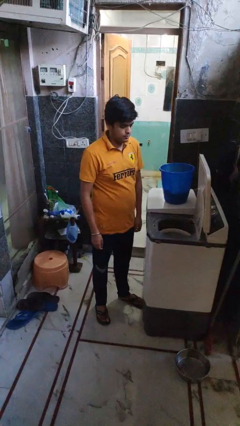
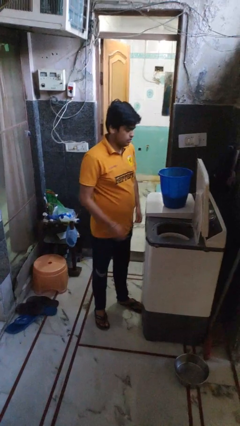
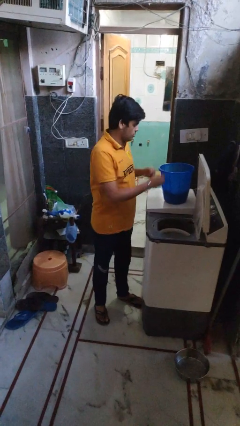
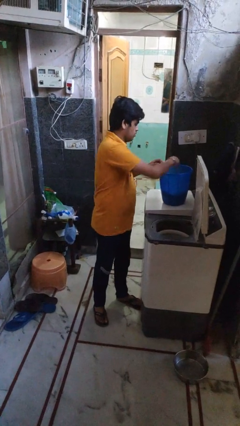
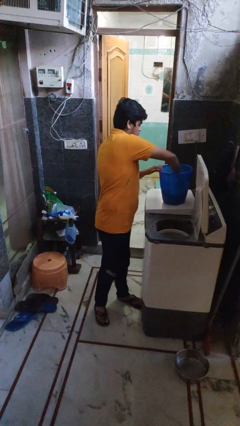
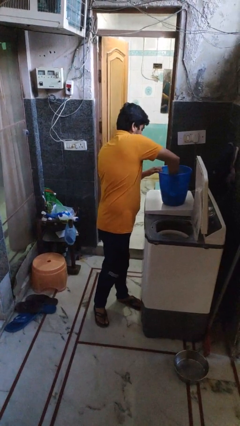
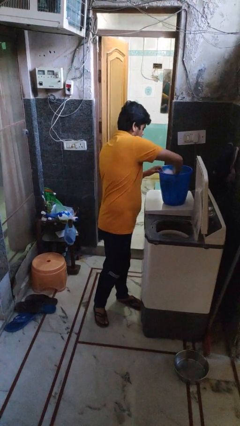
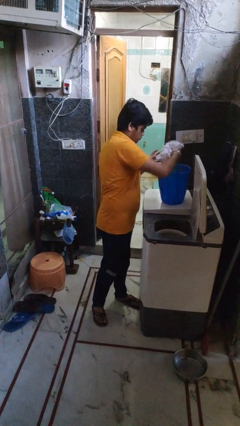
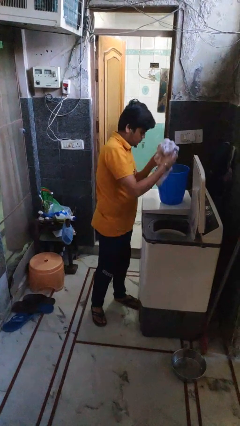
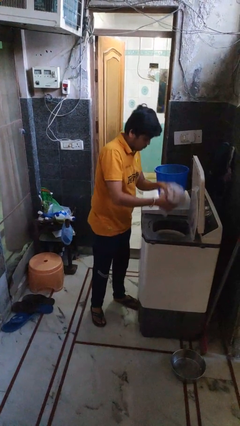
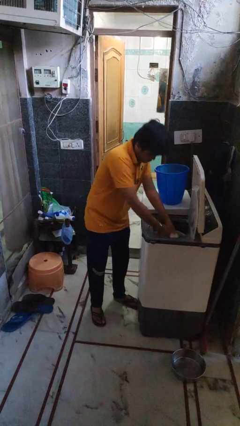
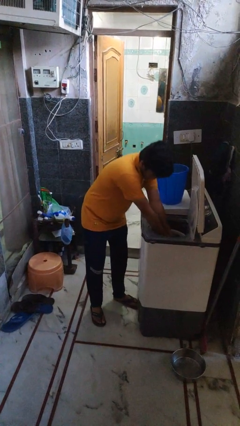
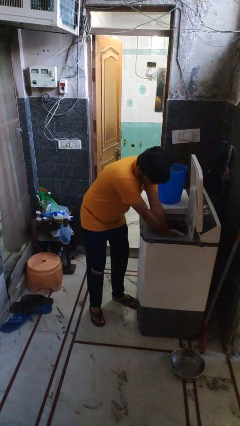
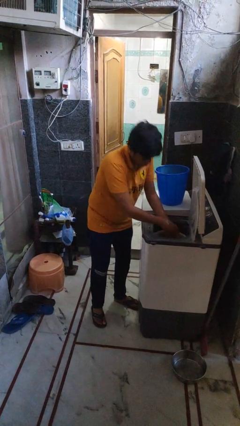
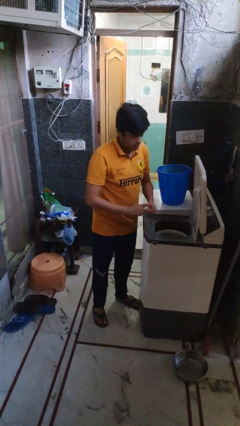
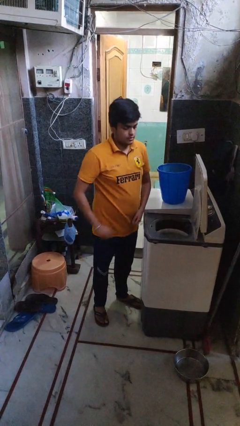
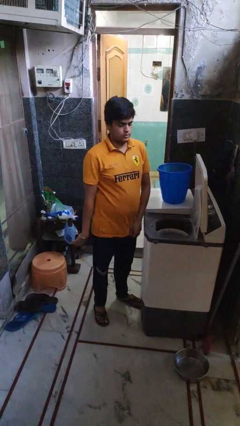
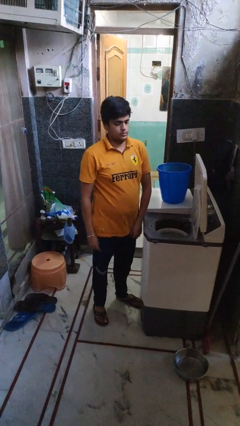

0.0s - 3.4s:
person loads clotheswasher

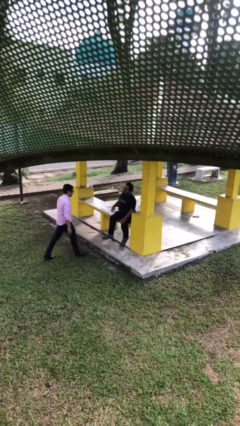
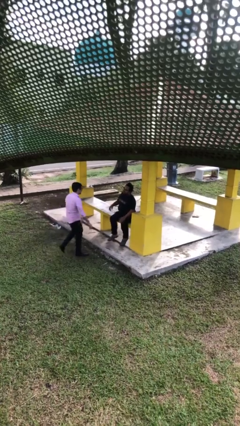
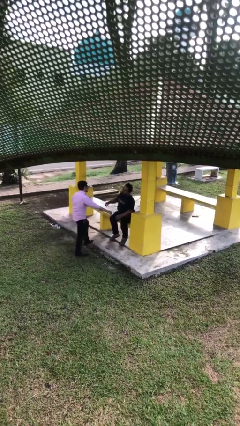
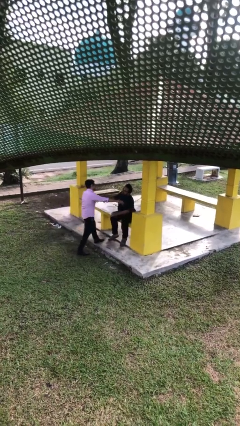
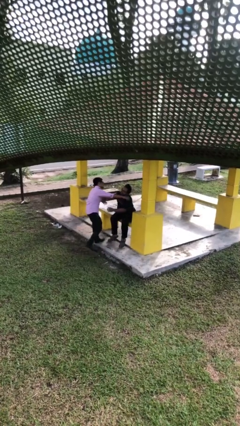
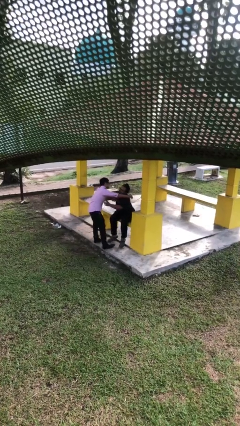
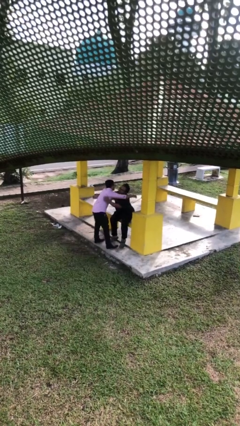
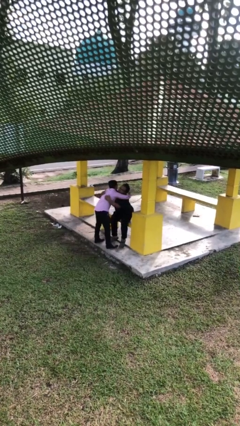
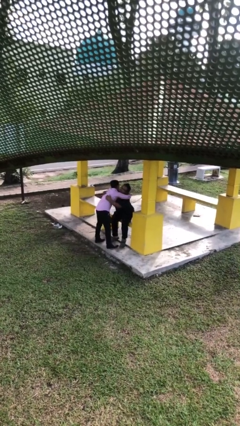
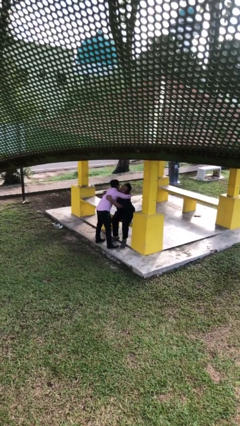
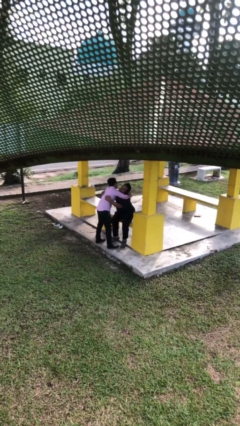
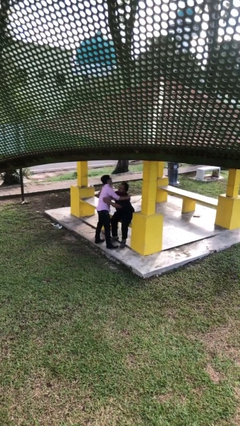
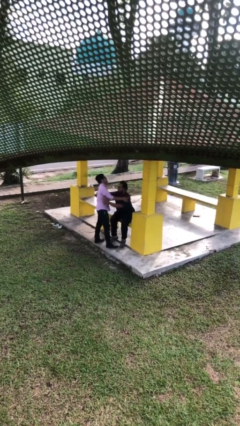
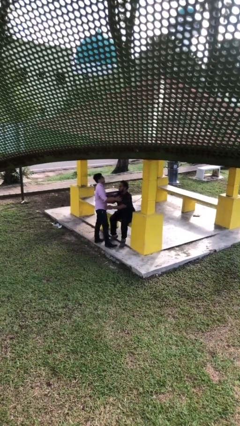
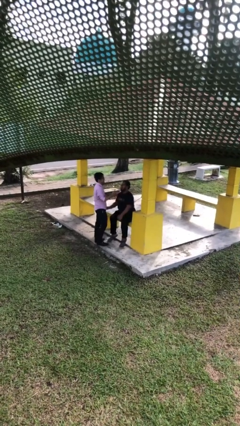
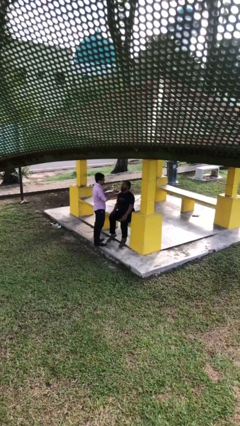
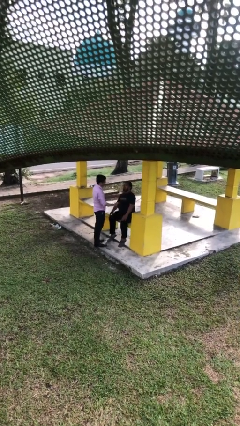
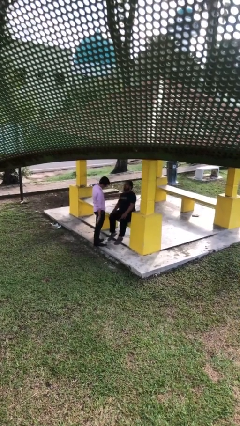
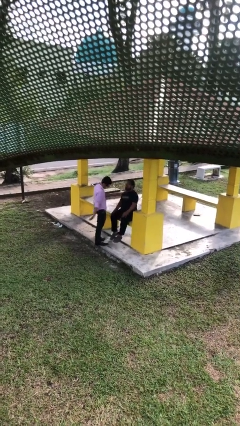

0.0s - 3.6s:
person embraces person

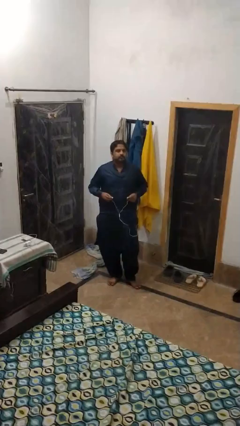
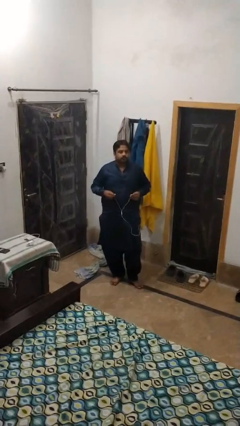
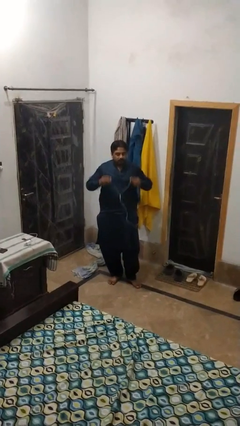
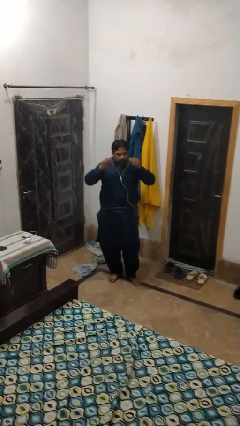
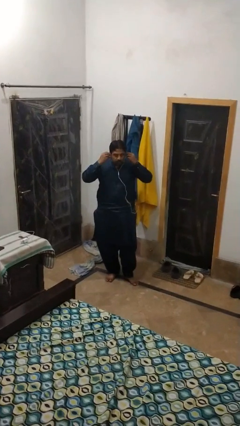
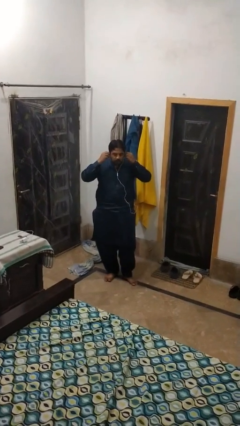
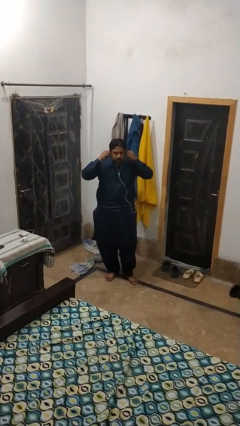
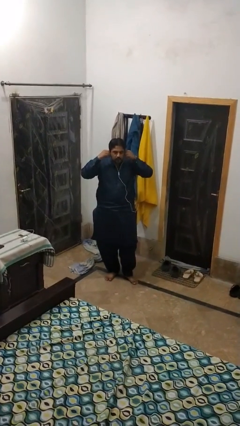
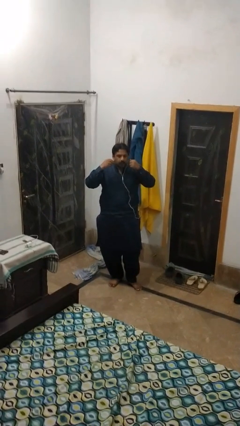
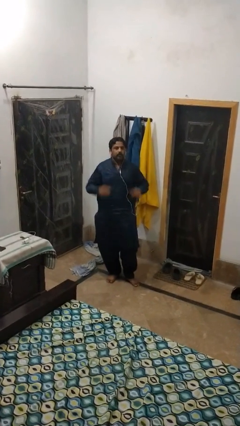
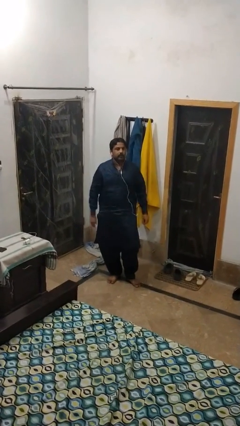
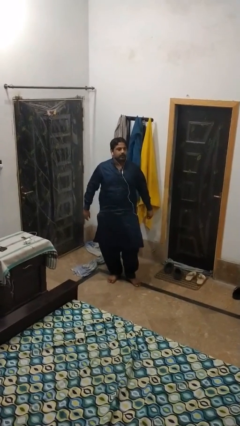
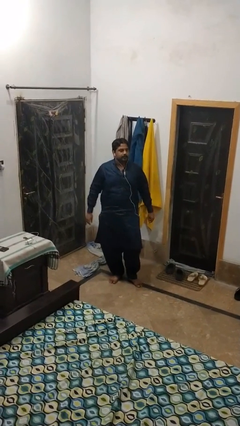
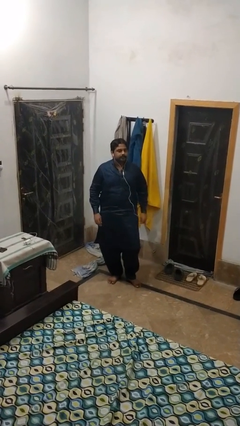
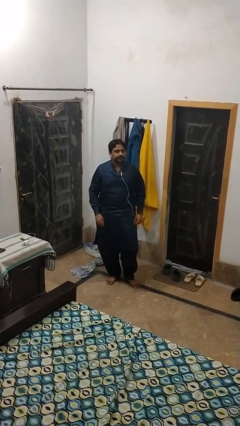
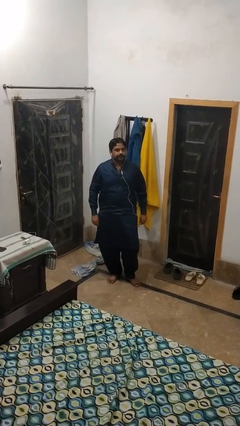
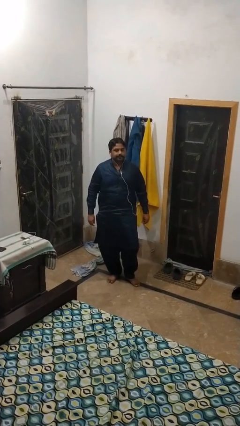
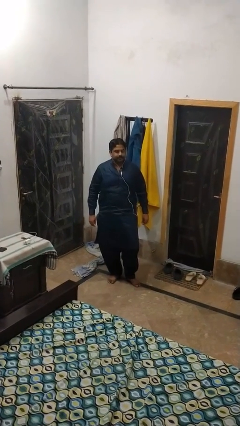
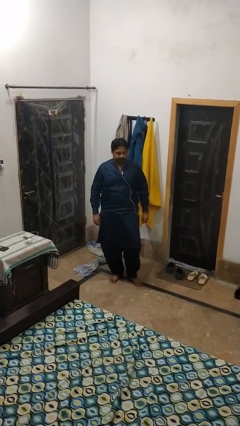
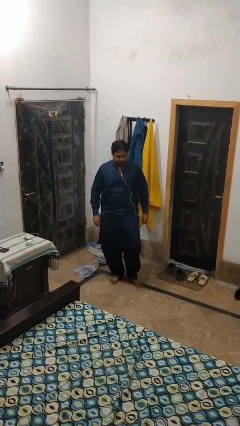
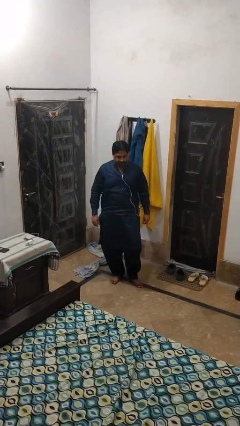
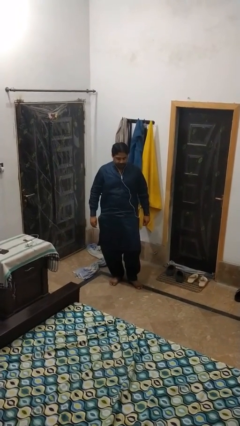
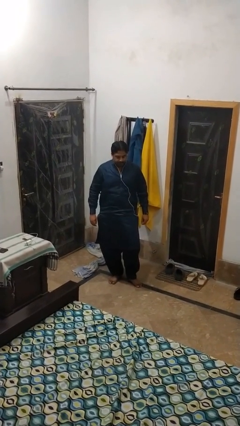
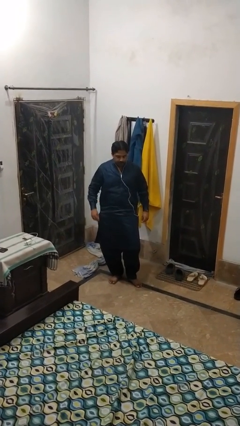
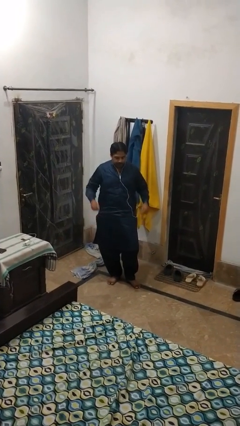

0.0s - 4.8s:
person puts on headphones

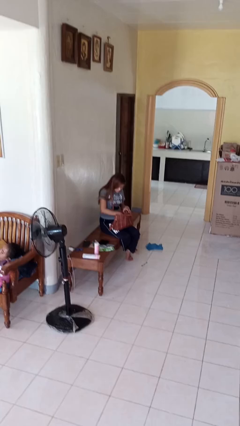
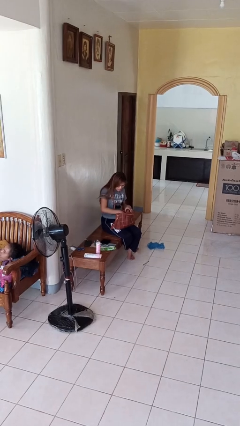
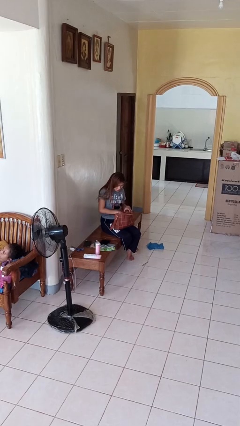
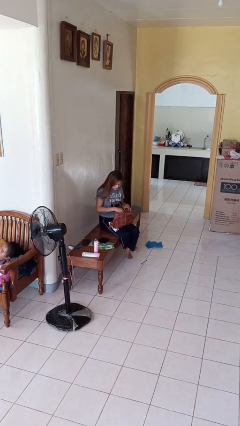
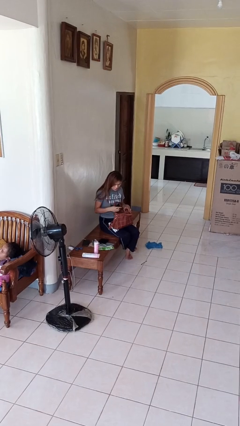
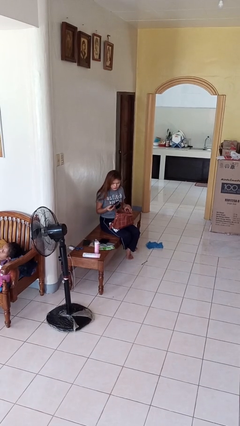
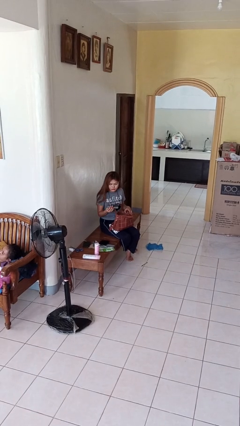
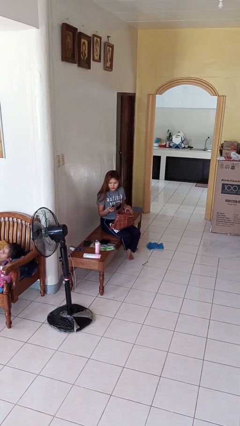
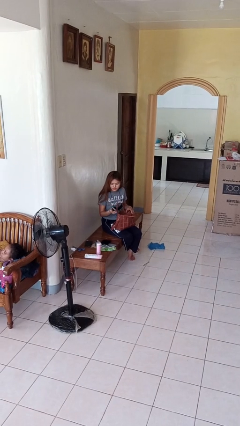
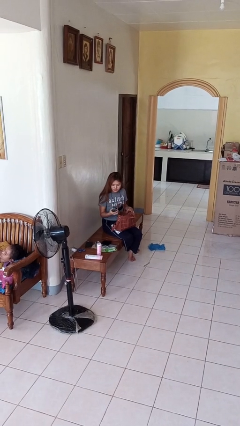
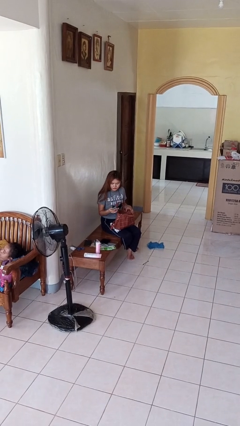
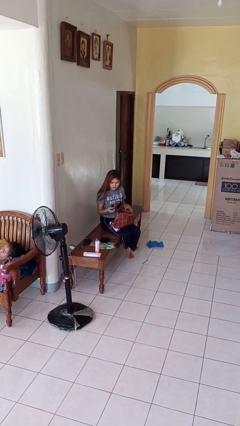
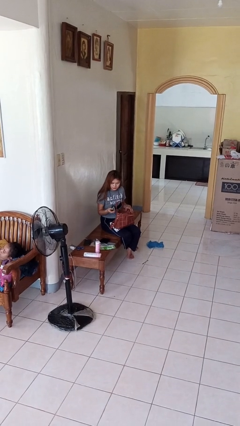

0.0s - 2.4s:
person takes object from purse

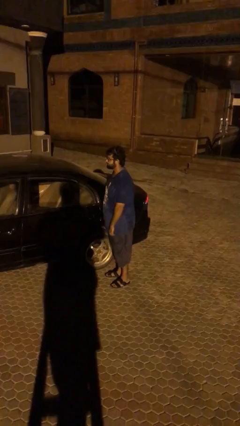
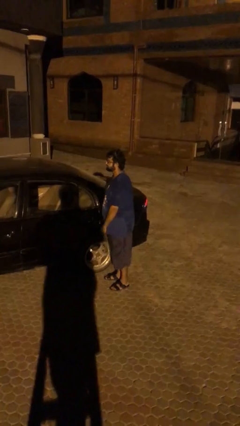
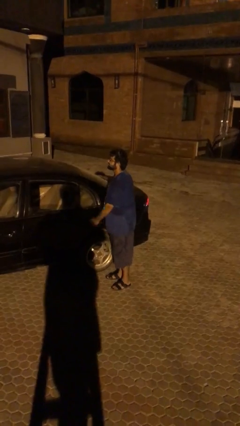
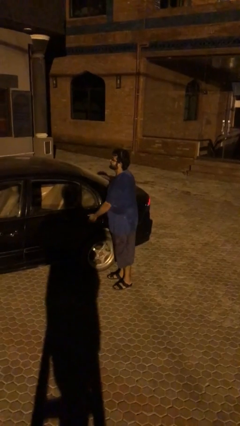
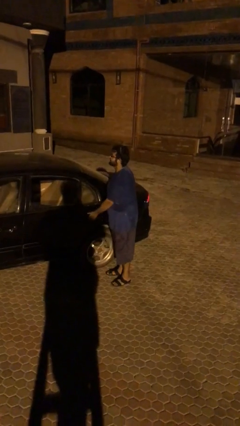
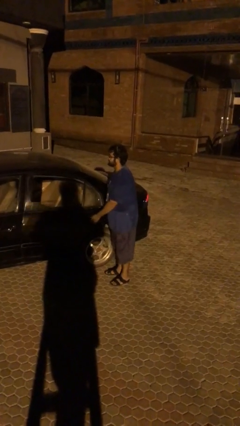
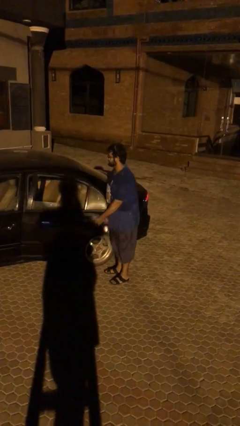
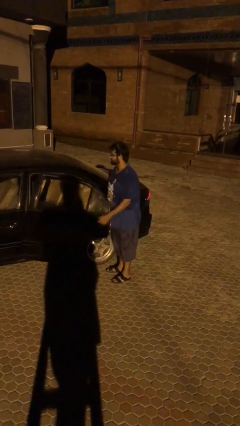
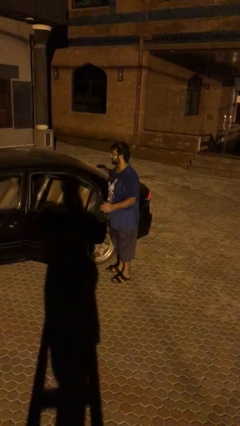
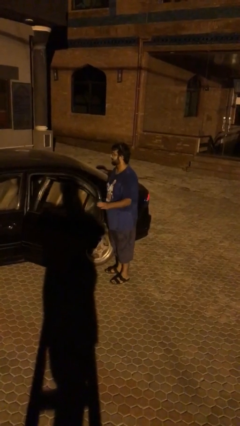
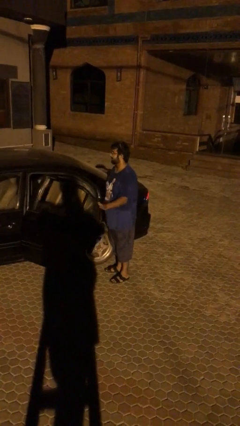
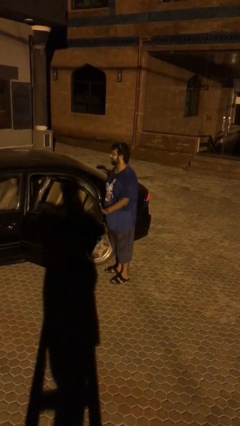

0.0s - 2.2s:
person opens car door

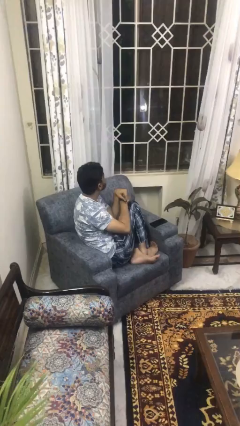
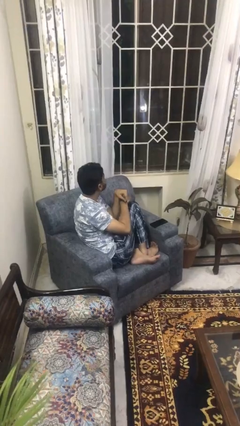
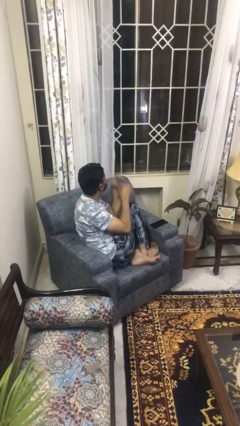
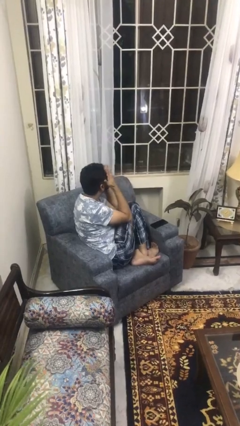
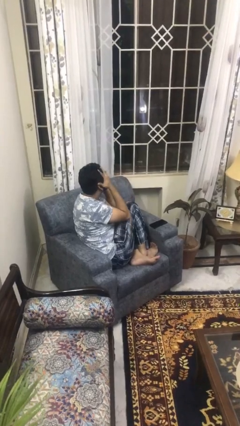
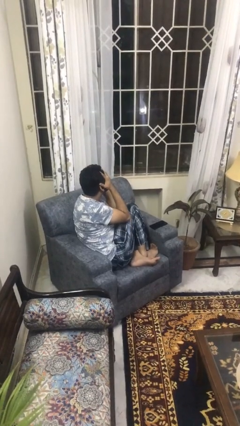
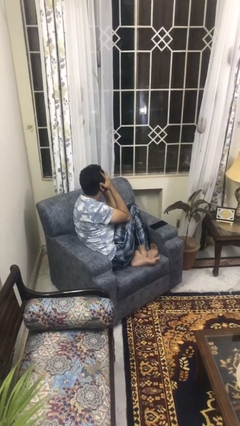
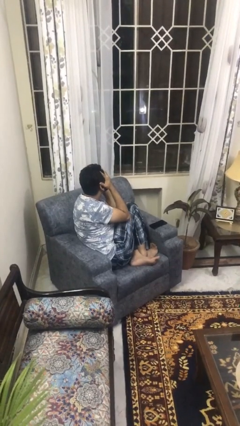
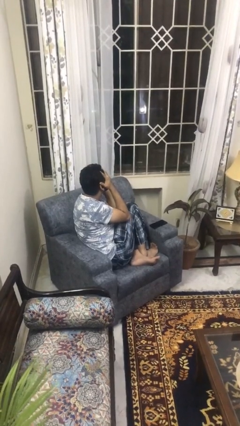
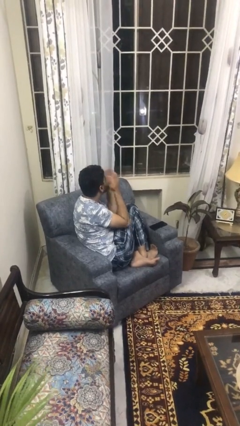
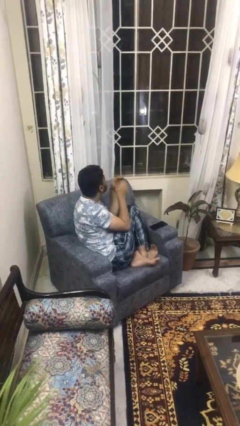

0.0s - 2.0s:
person covers face with hands
